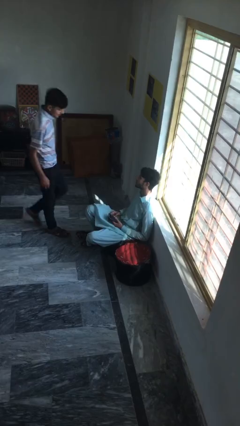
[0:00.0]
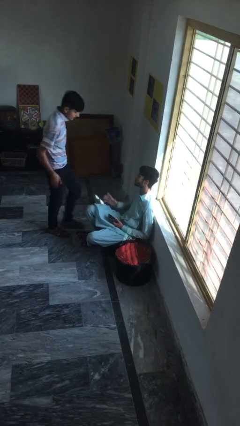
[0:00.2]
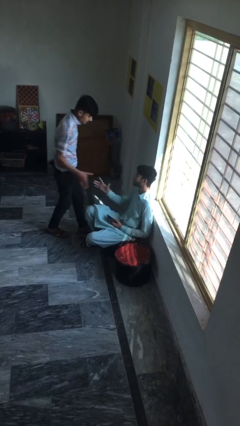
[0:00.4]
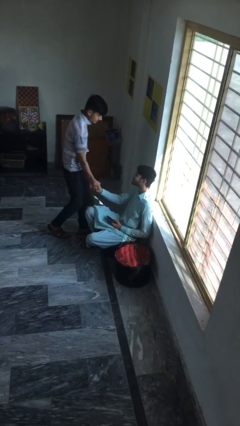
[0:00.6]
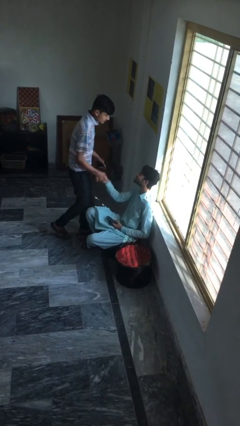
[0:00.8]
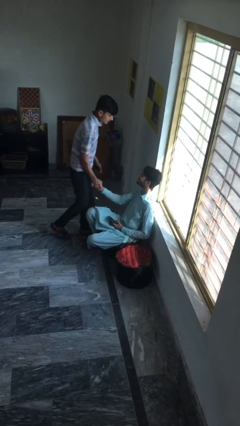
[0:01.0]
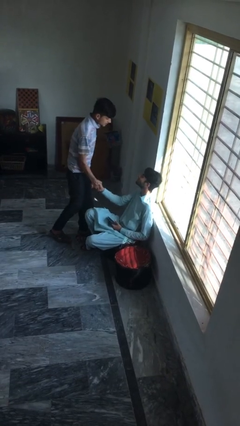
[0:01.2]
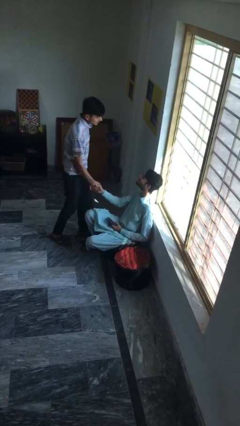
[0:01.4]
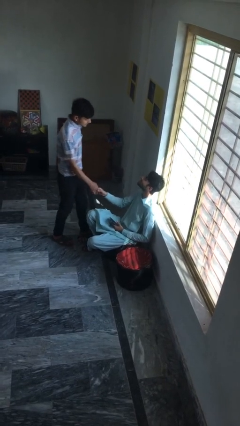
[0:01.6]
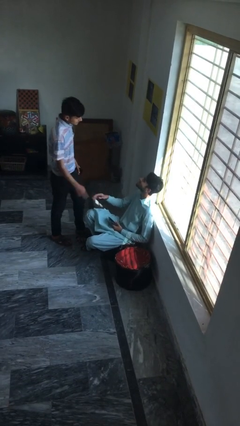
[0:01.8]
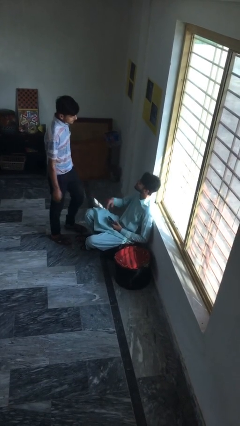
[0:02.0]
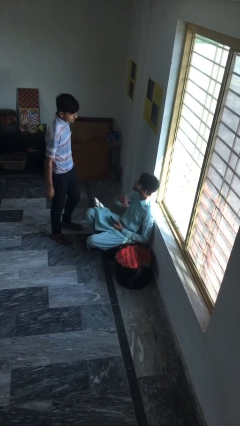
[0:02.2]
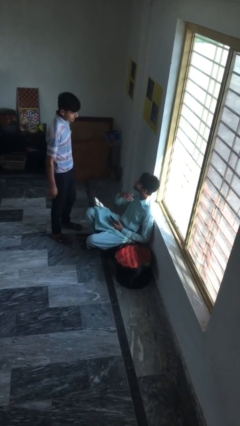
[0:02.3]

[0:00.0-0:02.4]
person shakes hand

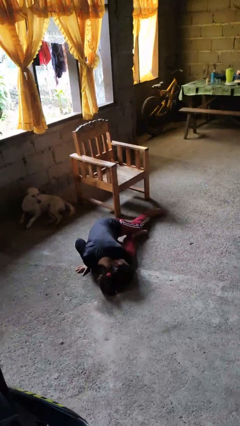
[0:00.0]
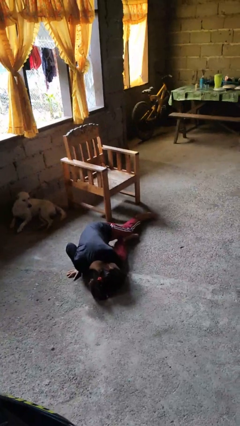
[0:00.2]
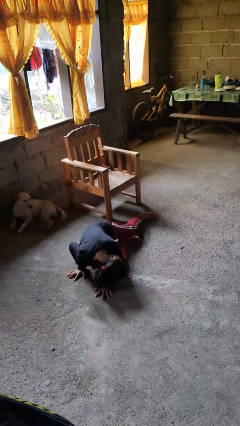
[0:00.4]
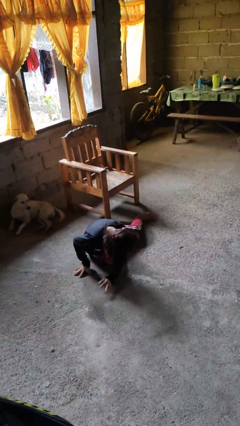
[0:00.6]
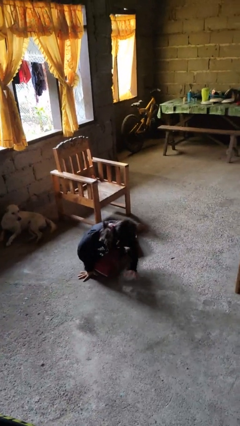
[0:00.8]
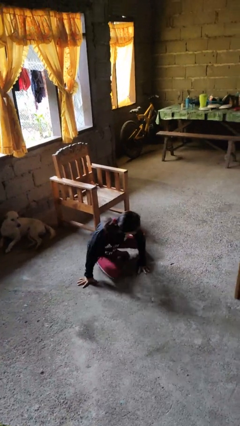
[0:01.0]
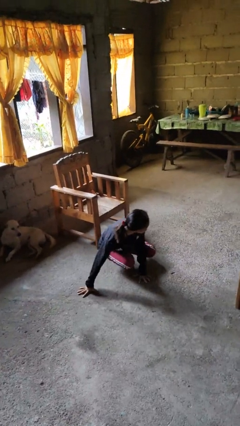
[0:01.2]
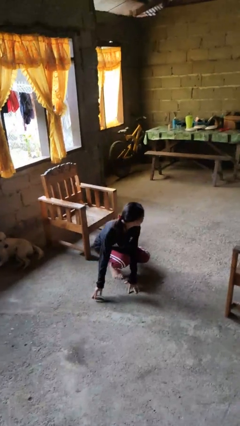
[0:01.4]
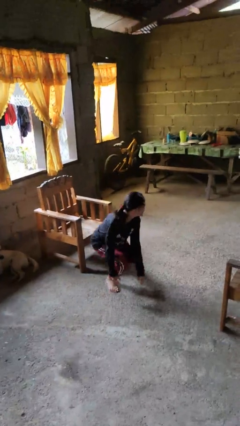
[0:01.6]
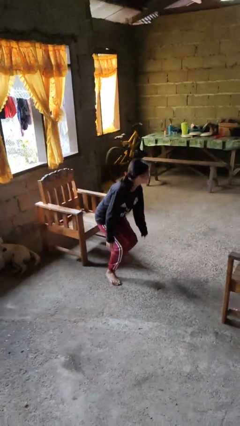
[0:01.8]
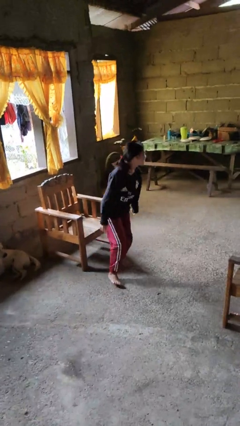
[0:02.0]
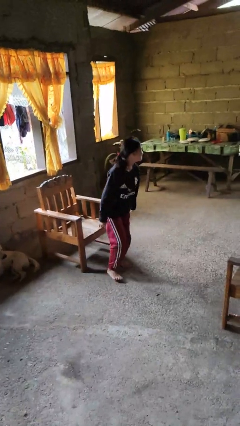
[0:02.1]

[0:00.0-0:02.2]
person stands up from floor

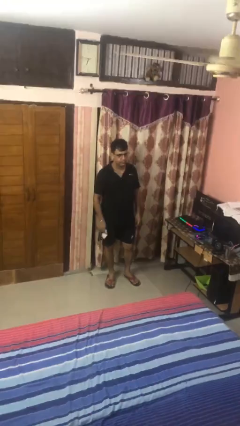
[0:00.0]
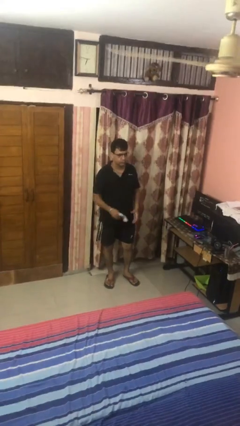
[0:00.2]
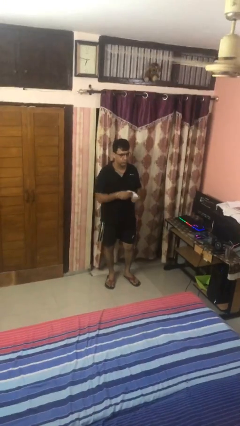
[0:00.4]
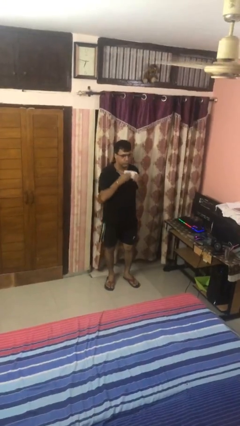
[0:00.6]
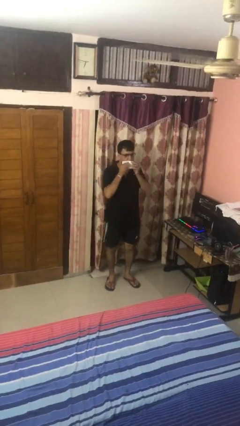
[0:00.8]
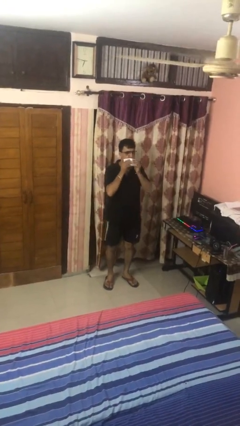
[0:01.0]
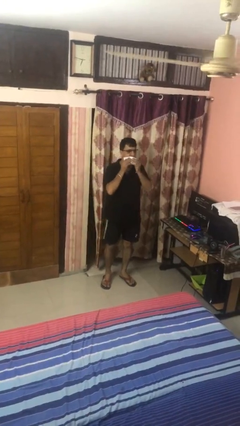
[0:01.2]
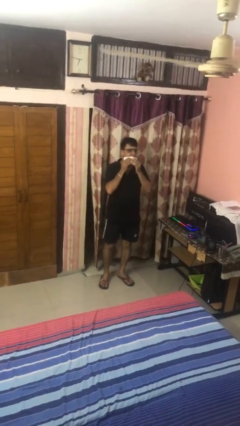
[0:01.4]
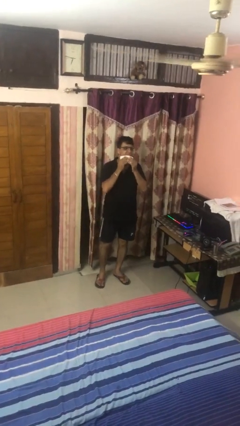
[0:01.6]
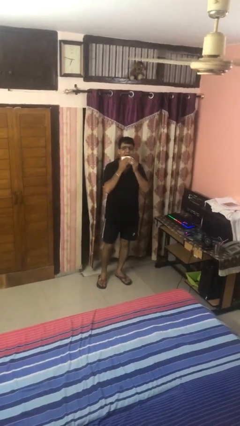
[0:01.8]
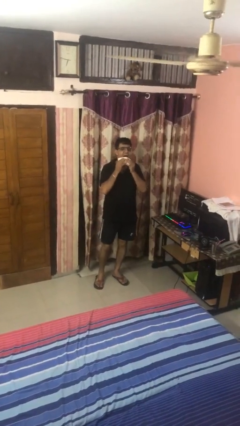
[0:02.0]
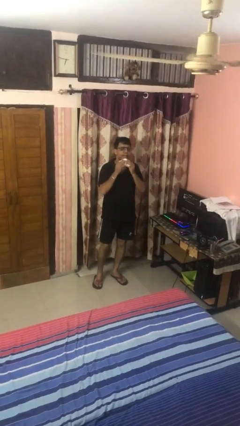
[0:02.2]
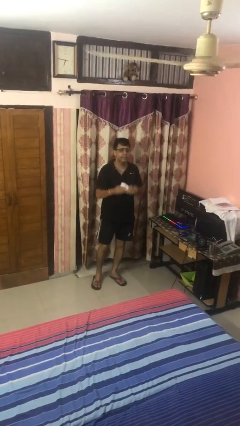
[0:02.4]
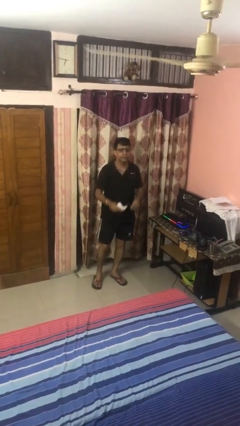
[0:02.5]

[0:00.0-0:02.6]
person wipes mouth with napkin

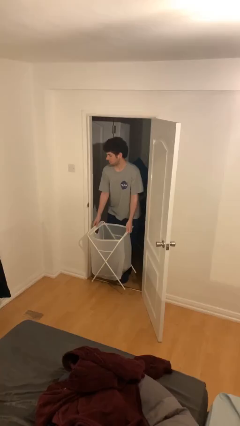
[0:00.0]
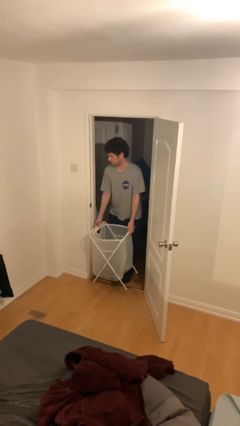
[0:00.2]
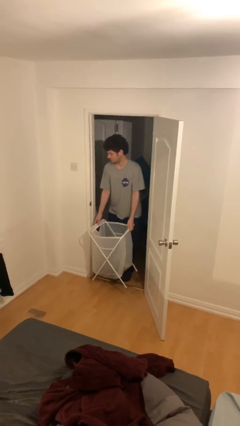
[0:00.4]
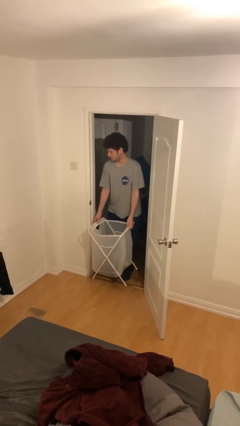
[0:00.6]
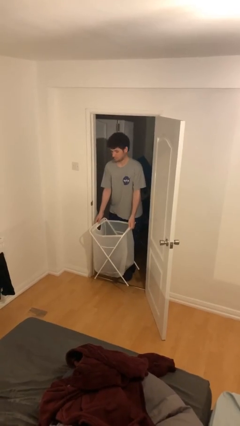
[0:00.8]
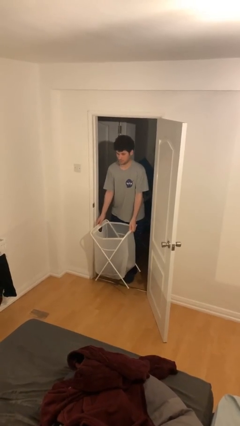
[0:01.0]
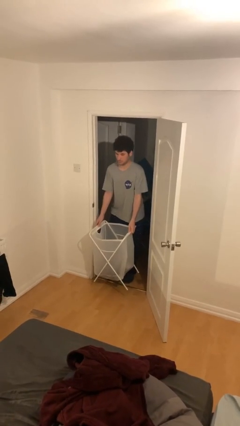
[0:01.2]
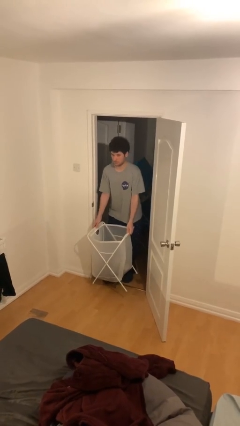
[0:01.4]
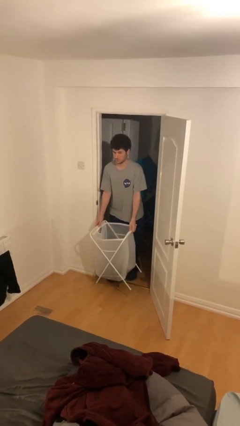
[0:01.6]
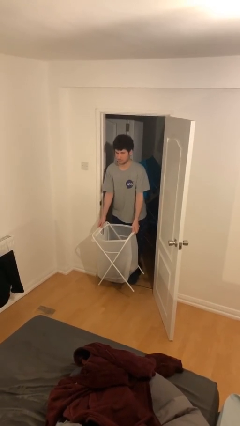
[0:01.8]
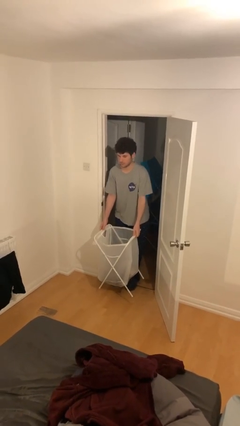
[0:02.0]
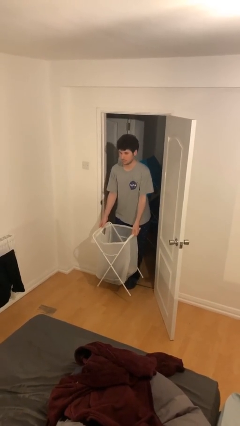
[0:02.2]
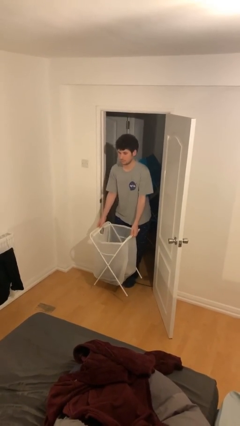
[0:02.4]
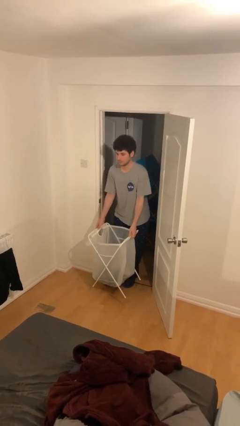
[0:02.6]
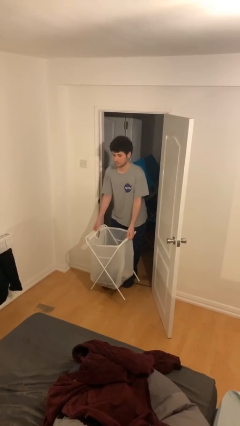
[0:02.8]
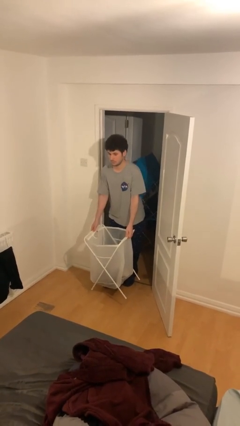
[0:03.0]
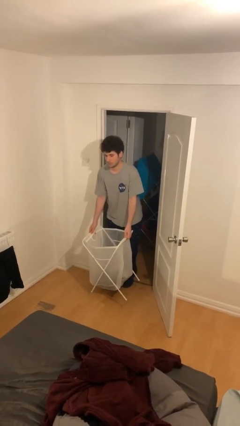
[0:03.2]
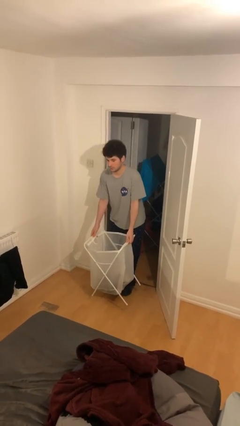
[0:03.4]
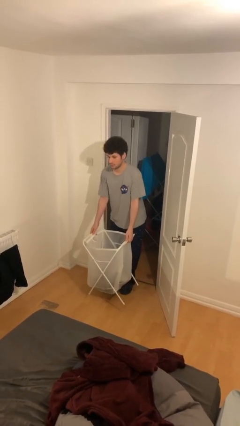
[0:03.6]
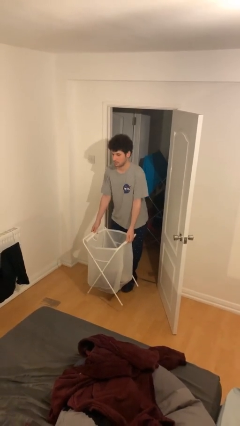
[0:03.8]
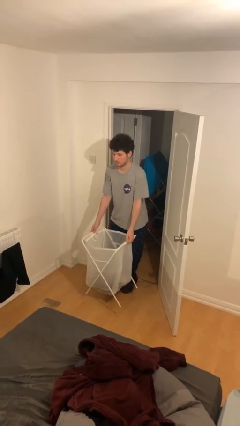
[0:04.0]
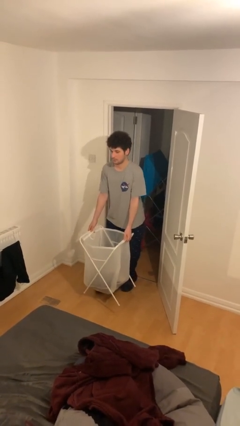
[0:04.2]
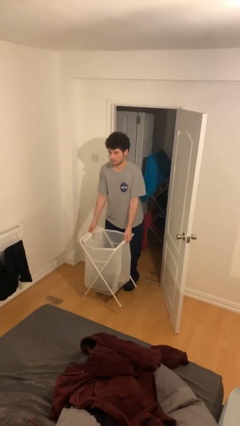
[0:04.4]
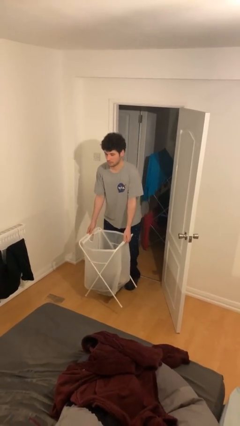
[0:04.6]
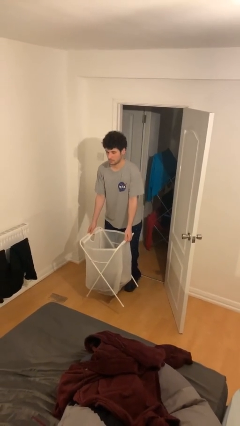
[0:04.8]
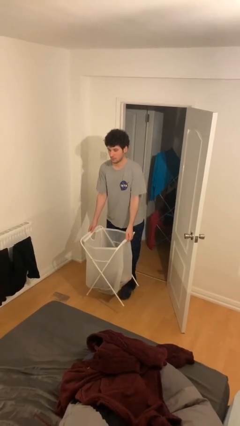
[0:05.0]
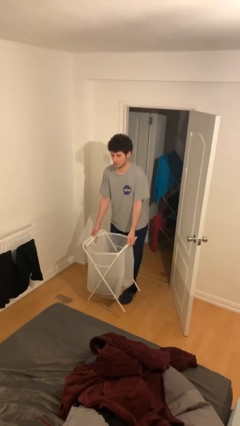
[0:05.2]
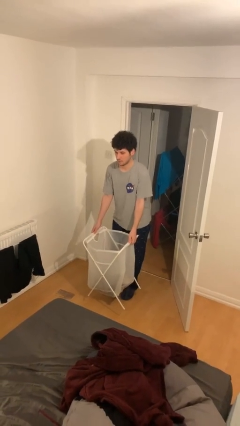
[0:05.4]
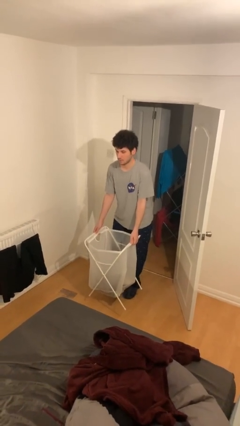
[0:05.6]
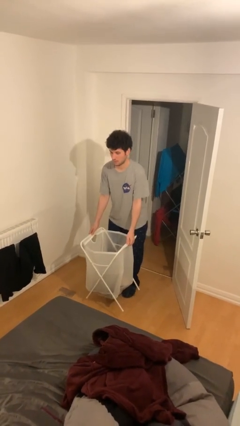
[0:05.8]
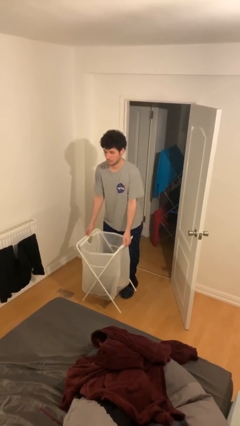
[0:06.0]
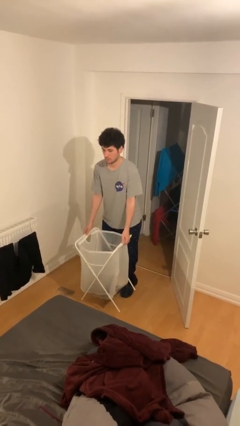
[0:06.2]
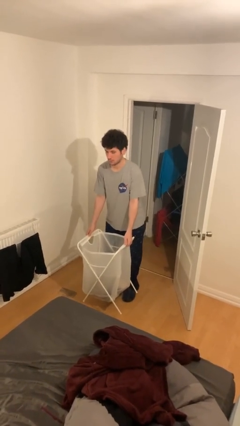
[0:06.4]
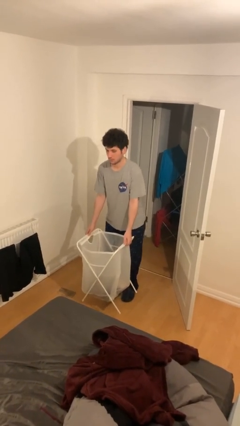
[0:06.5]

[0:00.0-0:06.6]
person carries heavy object

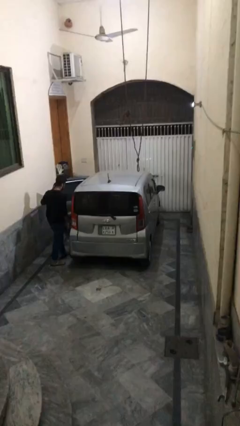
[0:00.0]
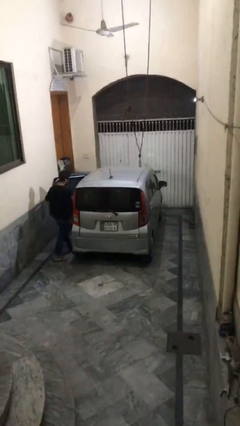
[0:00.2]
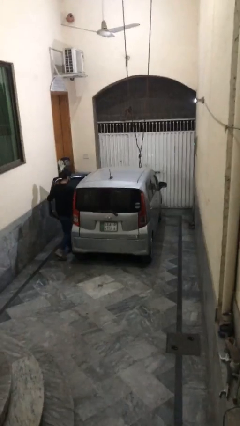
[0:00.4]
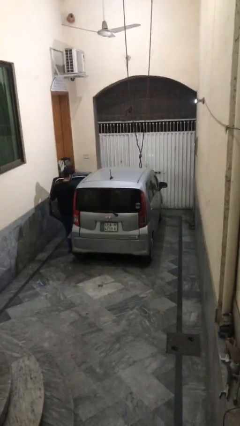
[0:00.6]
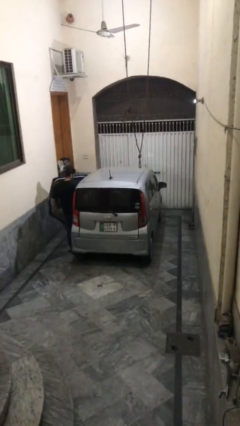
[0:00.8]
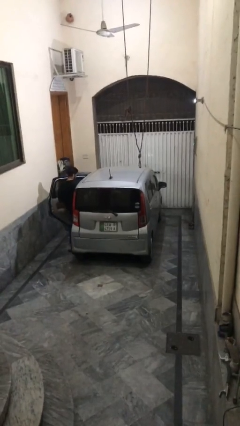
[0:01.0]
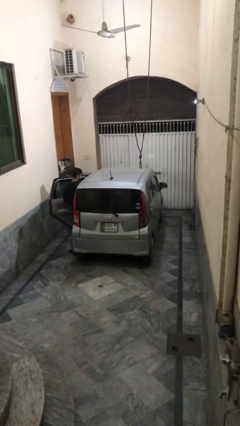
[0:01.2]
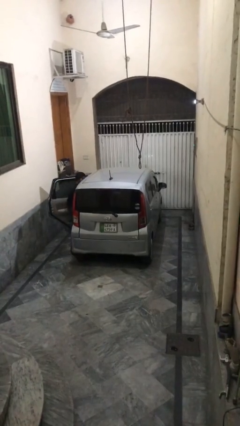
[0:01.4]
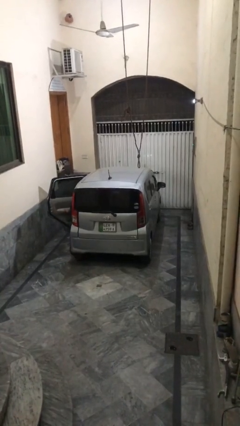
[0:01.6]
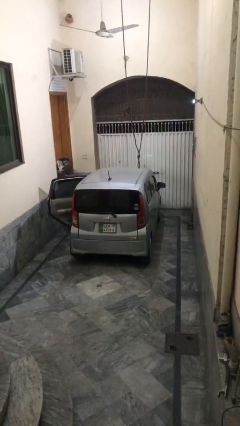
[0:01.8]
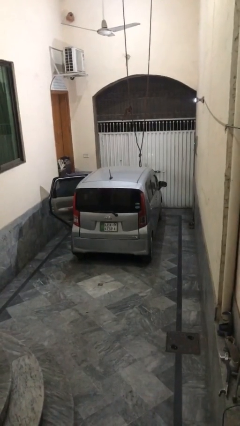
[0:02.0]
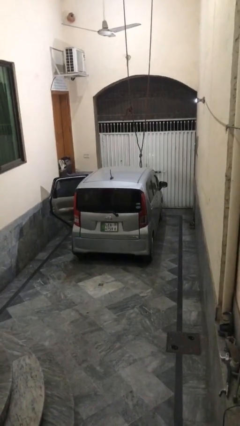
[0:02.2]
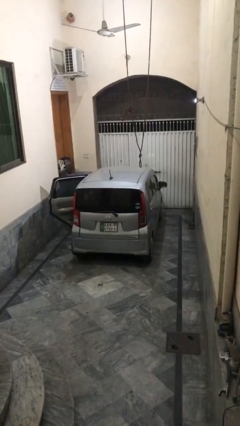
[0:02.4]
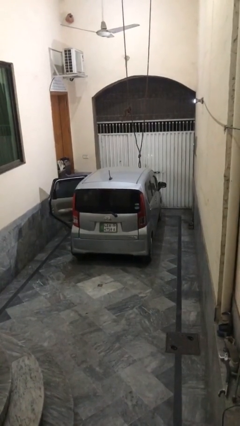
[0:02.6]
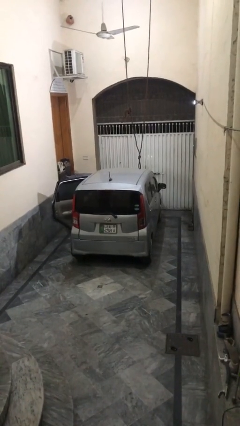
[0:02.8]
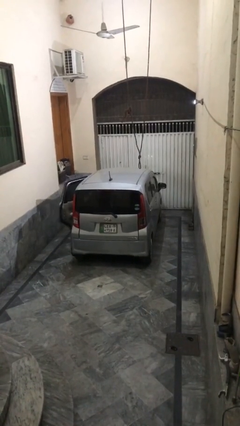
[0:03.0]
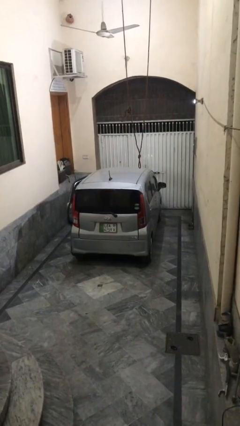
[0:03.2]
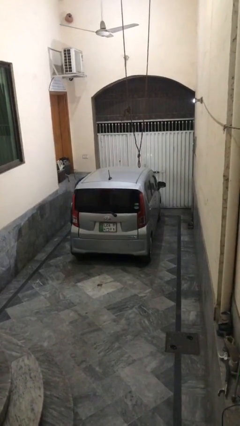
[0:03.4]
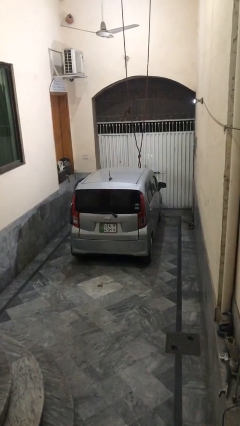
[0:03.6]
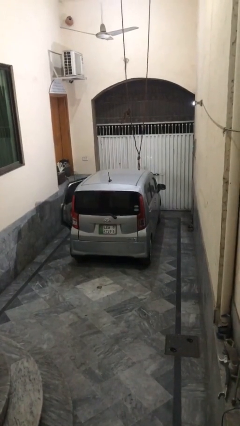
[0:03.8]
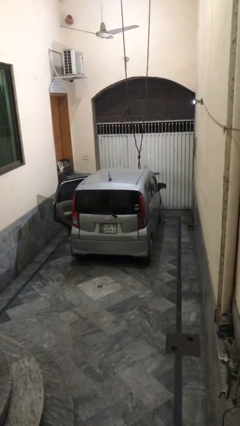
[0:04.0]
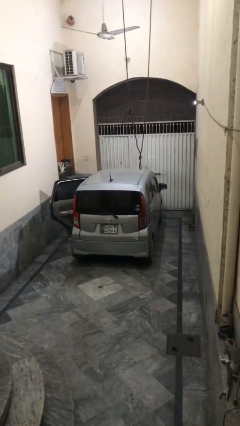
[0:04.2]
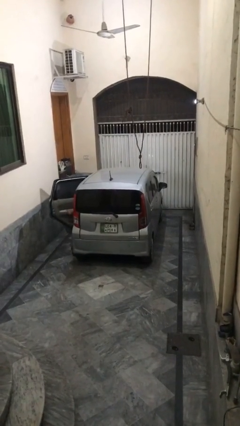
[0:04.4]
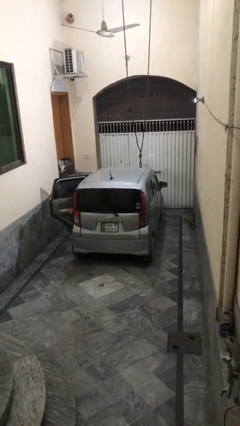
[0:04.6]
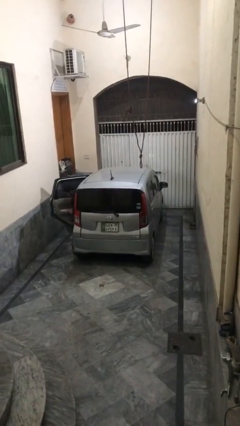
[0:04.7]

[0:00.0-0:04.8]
car picks up person
